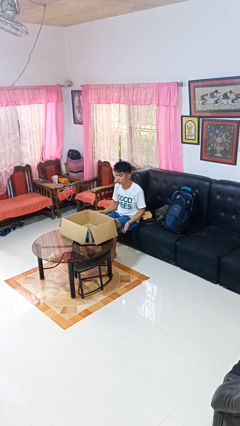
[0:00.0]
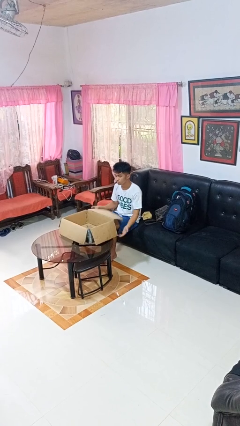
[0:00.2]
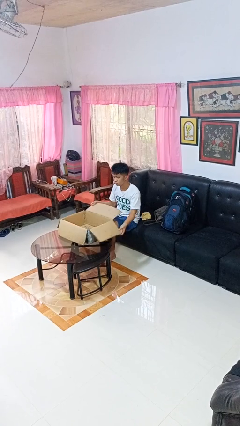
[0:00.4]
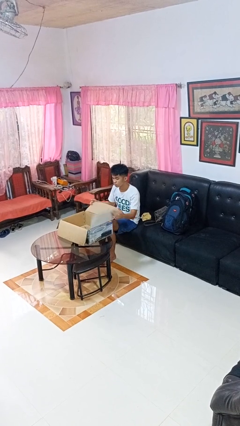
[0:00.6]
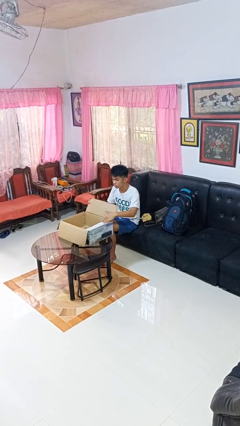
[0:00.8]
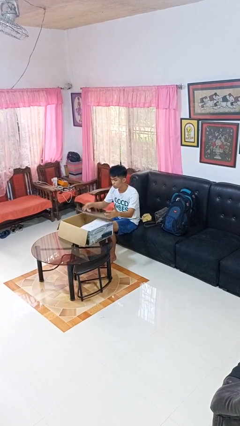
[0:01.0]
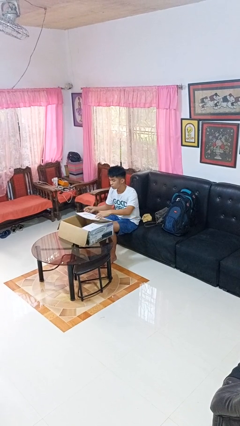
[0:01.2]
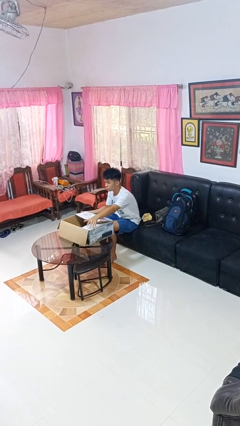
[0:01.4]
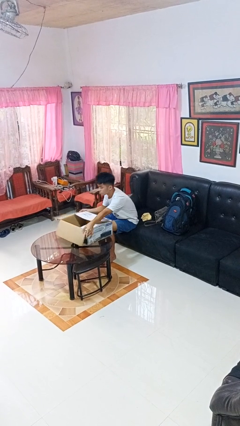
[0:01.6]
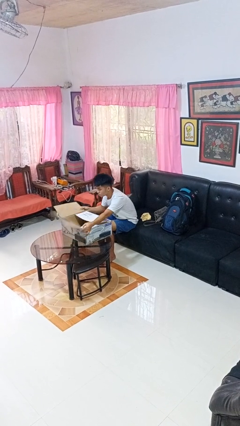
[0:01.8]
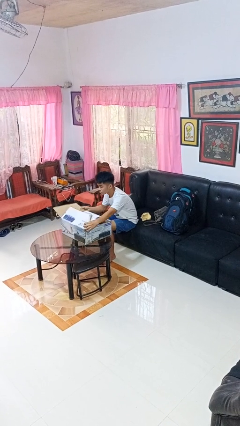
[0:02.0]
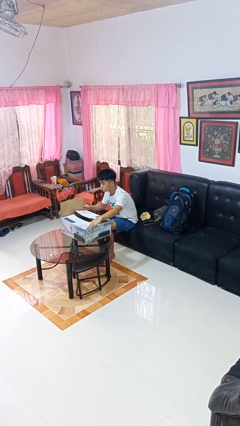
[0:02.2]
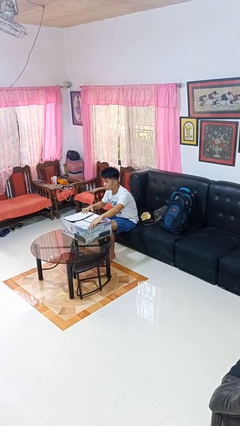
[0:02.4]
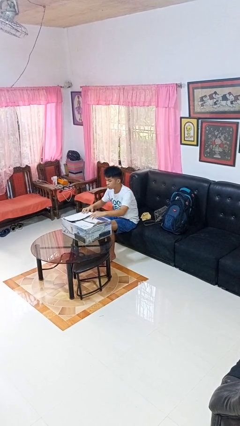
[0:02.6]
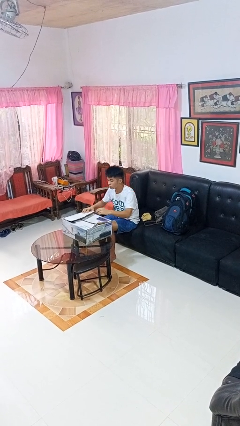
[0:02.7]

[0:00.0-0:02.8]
person closes box

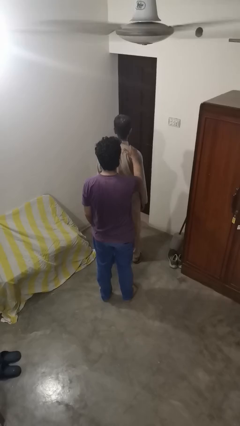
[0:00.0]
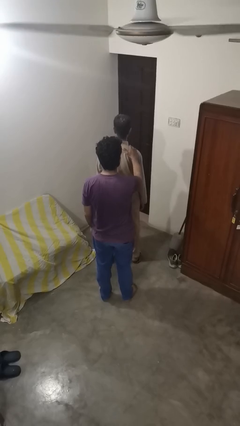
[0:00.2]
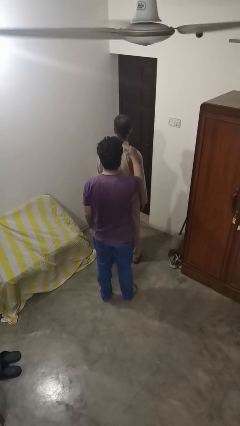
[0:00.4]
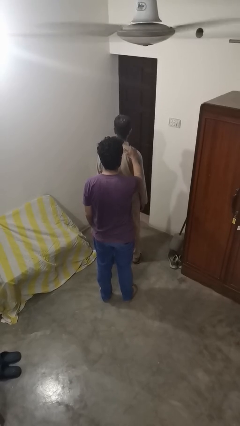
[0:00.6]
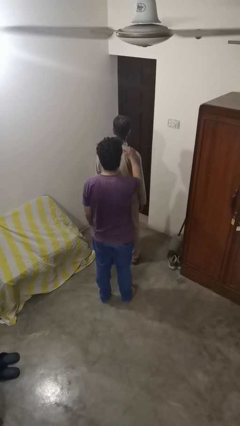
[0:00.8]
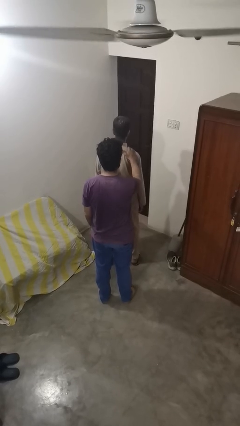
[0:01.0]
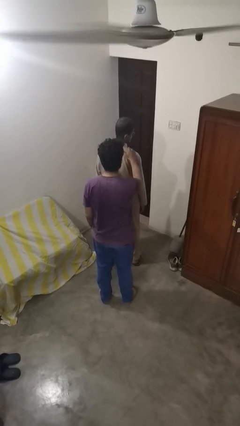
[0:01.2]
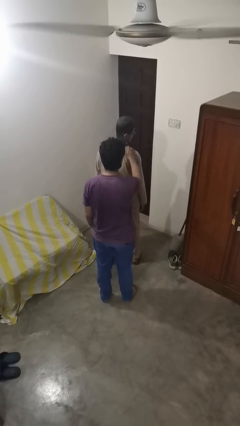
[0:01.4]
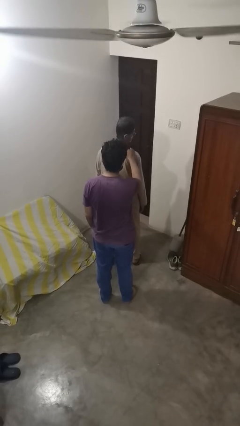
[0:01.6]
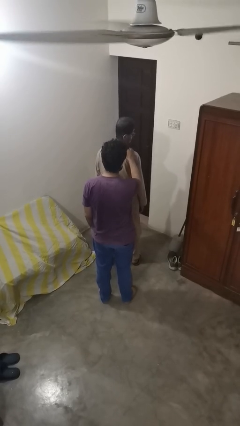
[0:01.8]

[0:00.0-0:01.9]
person grabs person by shoulder

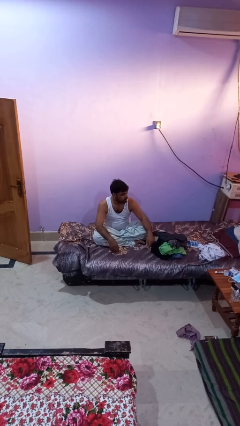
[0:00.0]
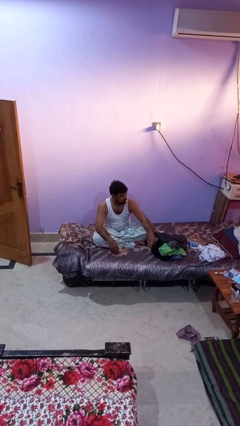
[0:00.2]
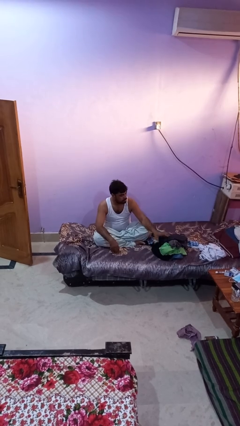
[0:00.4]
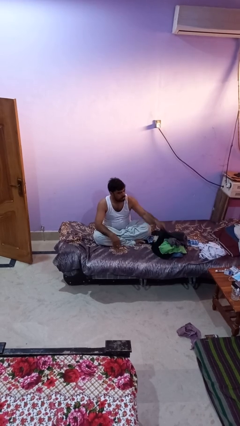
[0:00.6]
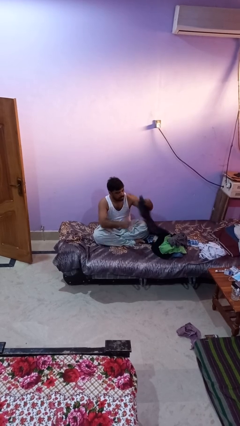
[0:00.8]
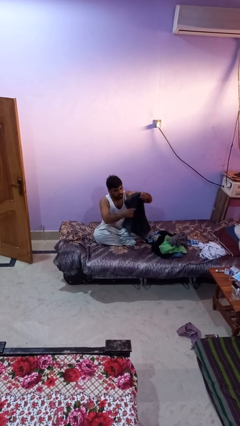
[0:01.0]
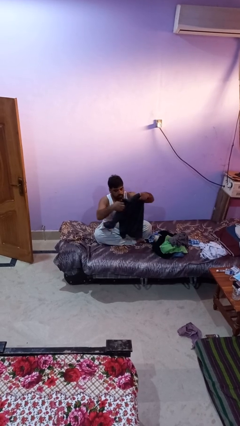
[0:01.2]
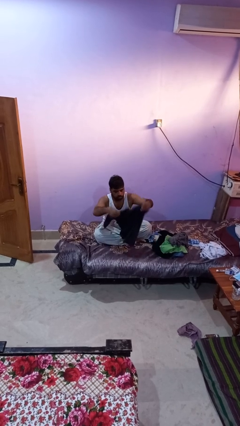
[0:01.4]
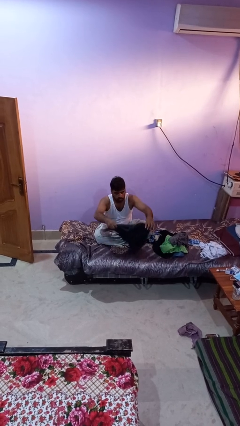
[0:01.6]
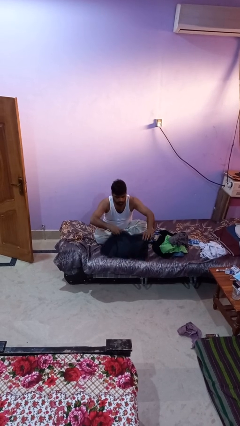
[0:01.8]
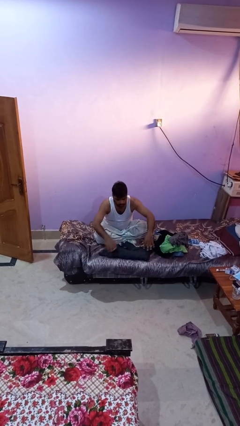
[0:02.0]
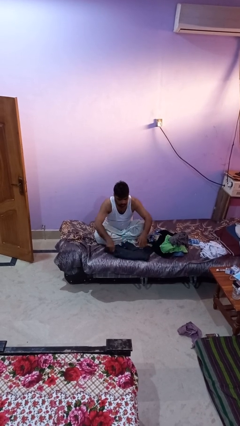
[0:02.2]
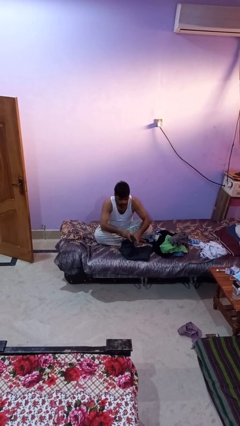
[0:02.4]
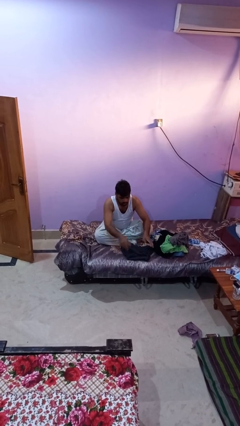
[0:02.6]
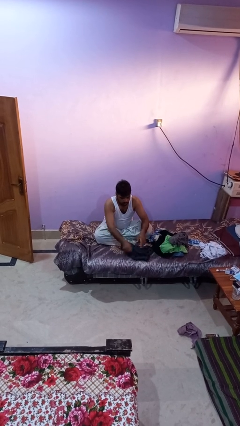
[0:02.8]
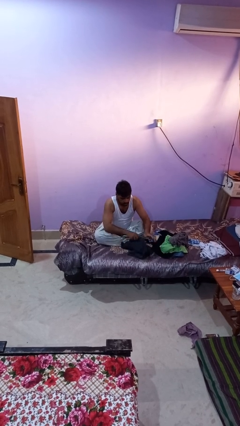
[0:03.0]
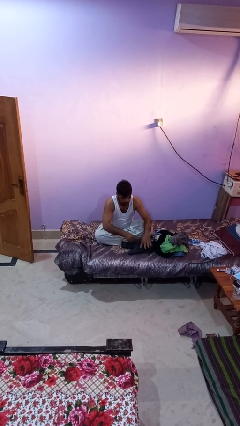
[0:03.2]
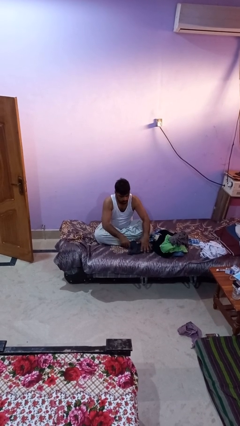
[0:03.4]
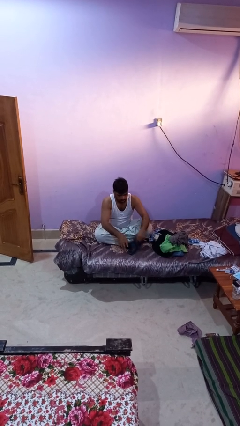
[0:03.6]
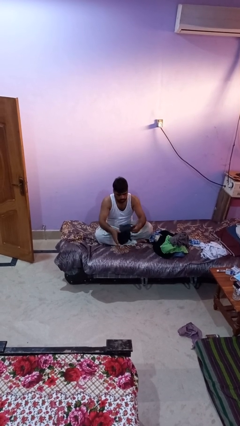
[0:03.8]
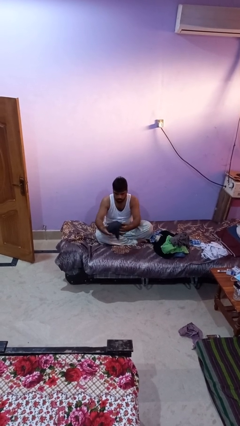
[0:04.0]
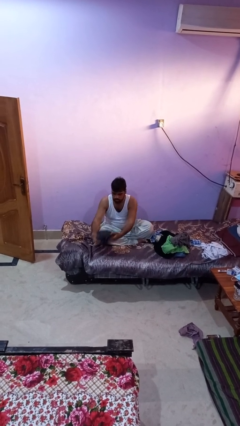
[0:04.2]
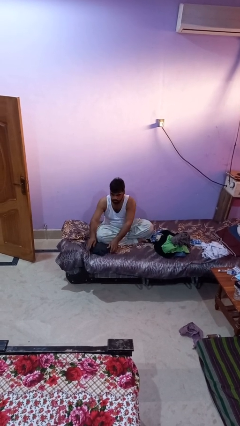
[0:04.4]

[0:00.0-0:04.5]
person folds shirt

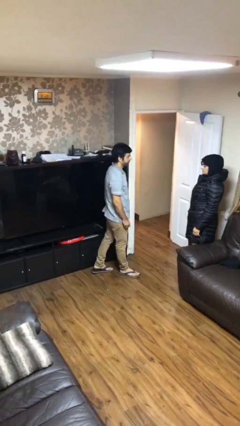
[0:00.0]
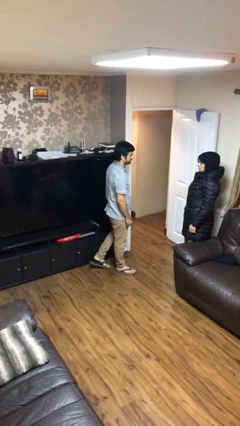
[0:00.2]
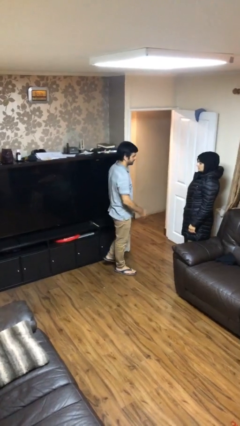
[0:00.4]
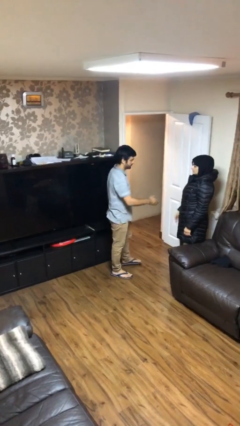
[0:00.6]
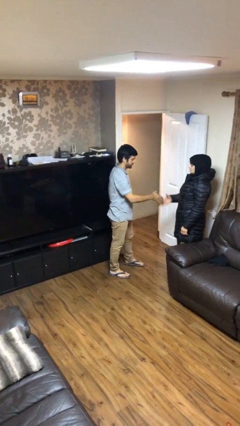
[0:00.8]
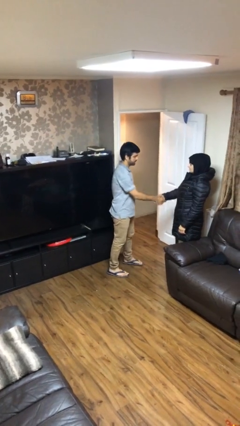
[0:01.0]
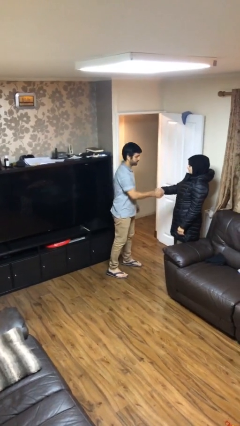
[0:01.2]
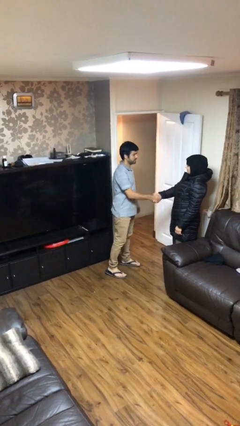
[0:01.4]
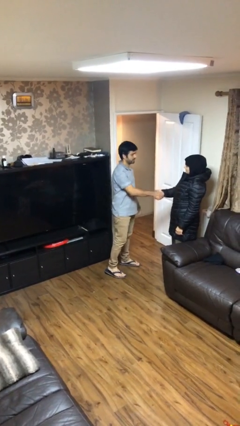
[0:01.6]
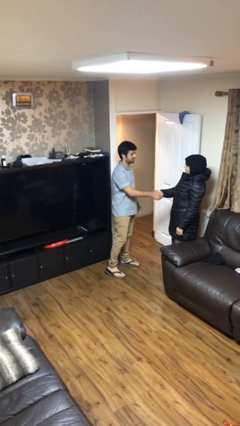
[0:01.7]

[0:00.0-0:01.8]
person shakes hand

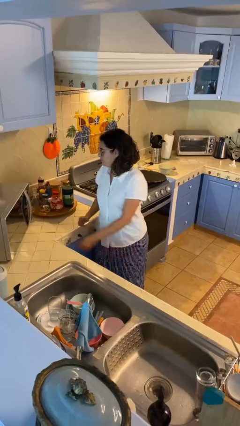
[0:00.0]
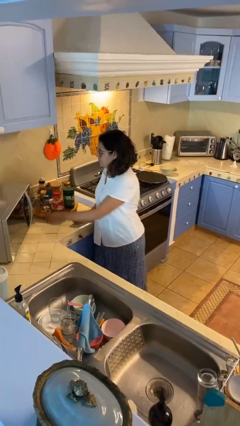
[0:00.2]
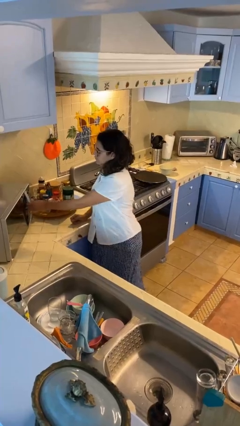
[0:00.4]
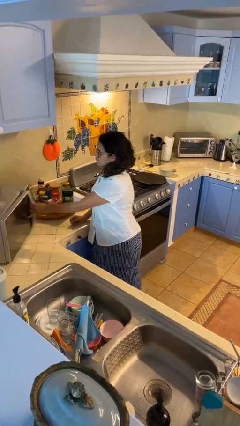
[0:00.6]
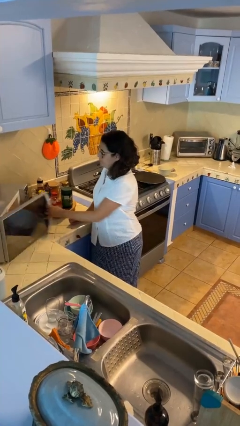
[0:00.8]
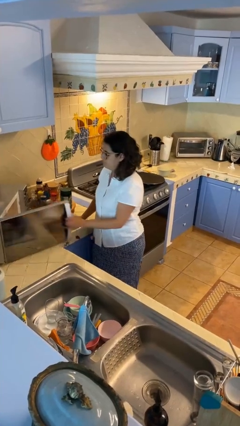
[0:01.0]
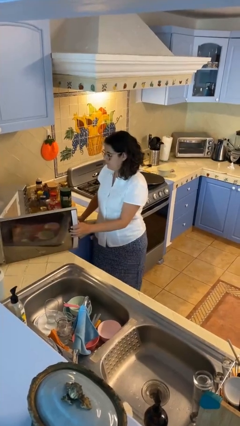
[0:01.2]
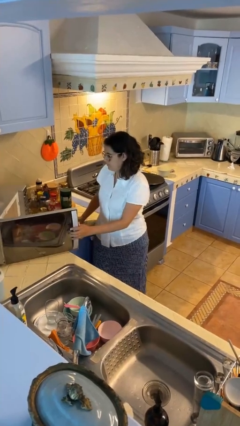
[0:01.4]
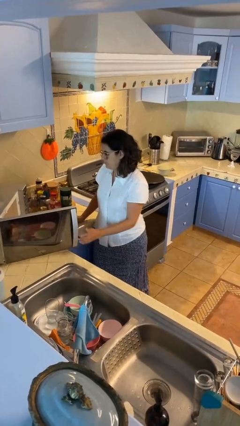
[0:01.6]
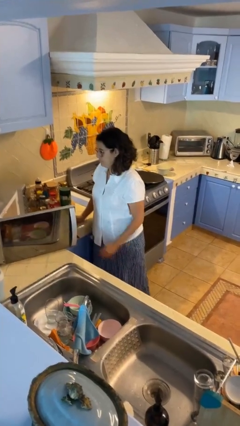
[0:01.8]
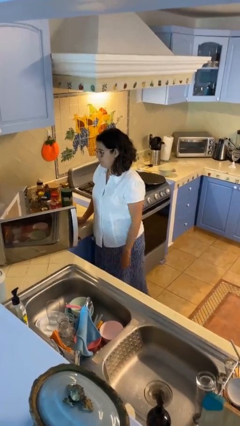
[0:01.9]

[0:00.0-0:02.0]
person opens microwave

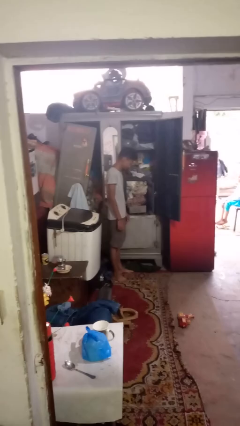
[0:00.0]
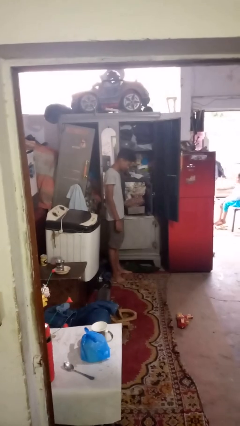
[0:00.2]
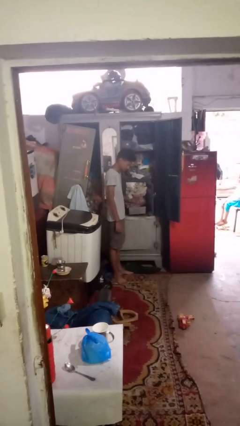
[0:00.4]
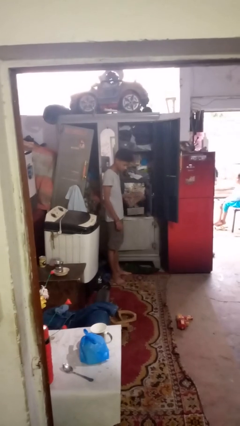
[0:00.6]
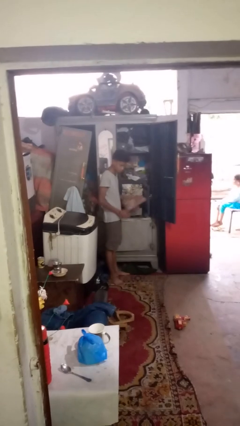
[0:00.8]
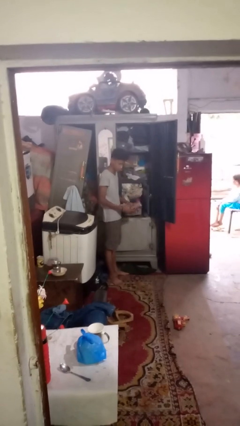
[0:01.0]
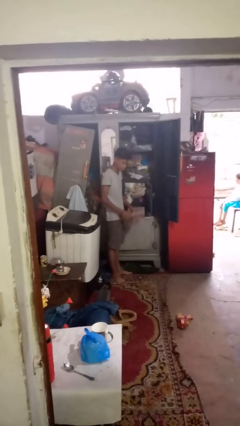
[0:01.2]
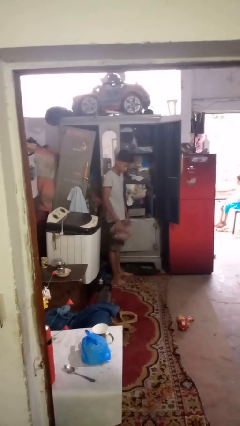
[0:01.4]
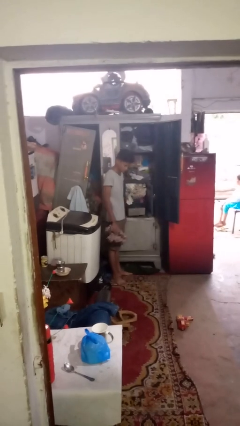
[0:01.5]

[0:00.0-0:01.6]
person takes clothes from dresser

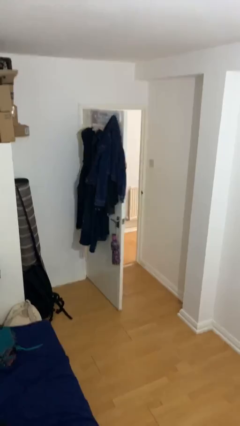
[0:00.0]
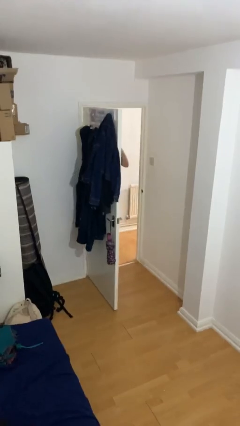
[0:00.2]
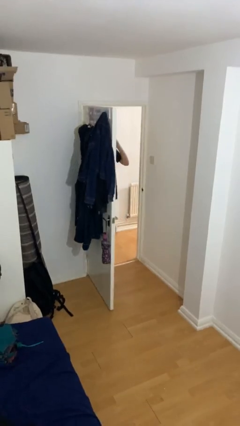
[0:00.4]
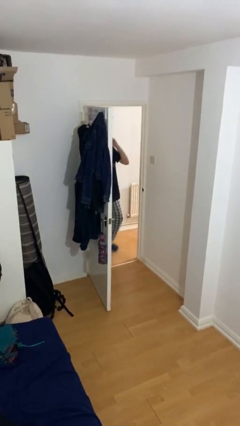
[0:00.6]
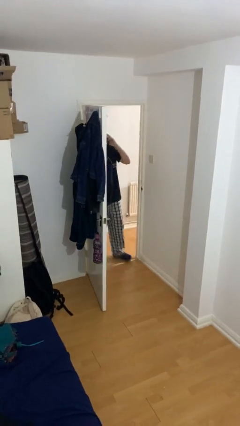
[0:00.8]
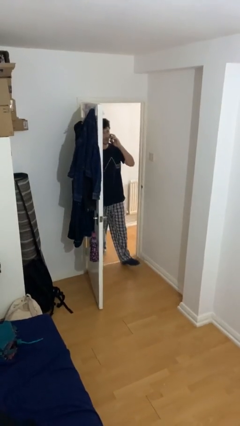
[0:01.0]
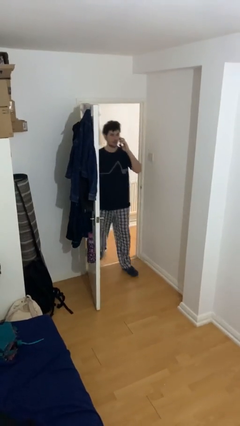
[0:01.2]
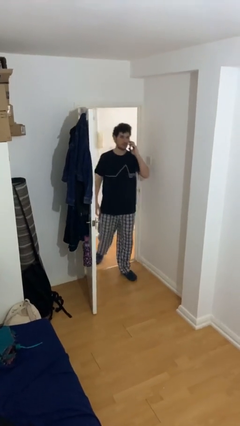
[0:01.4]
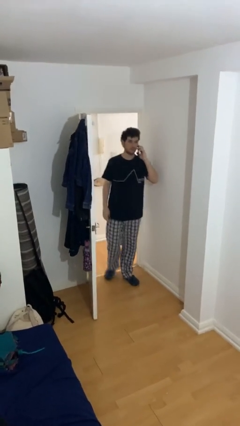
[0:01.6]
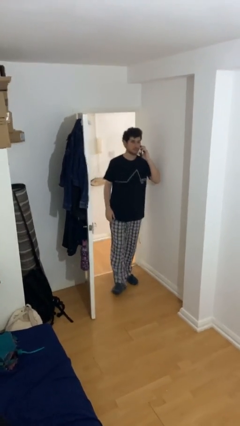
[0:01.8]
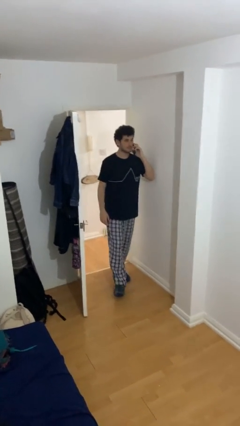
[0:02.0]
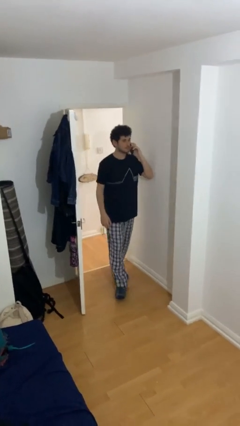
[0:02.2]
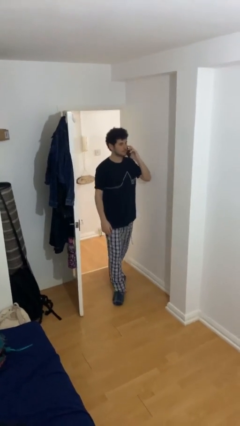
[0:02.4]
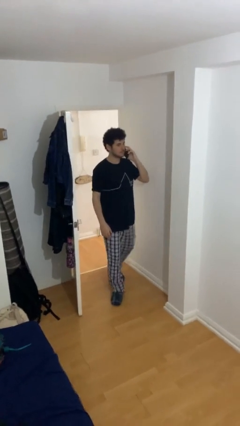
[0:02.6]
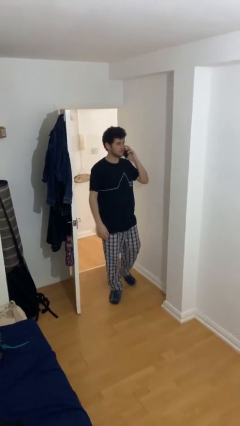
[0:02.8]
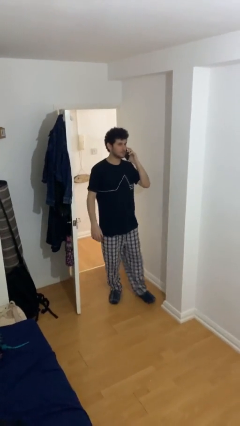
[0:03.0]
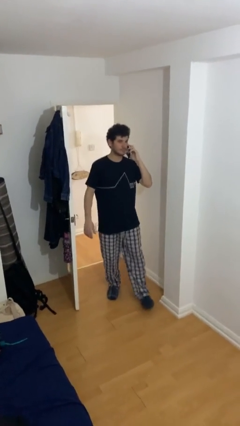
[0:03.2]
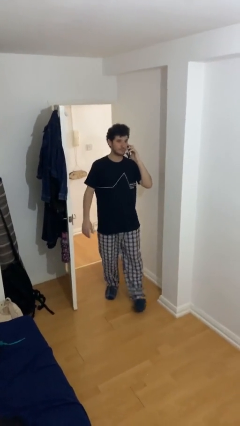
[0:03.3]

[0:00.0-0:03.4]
person enters scene through structure
